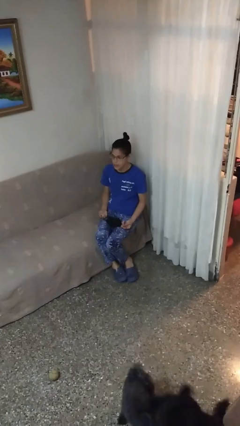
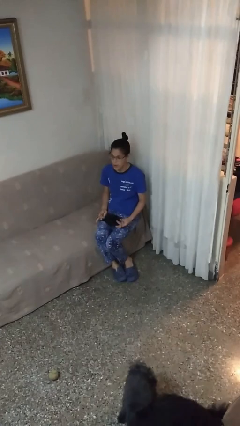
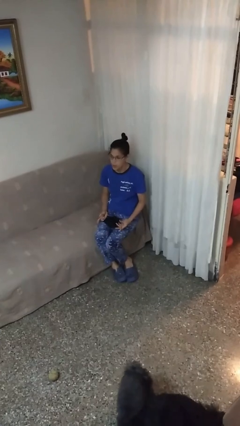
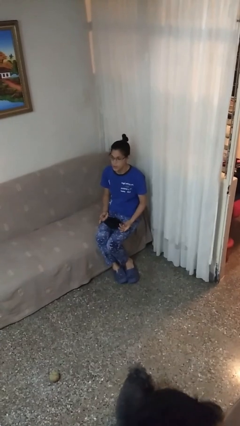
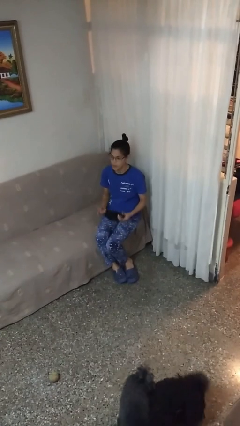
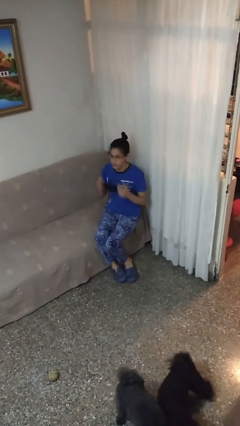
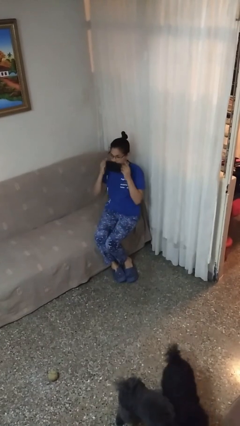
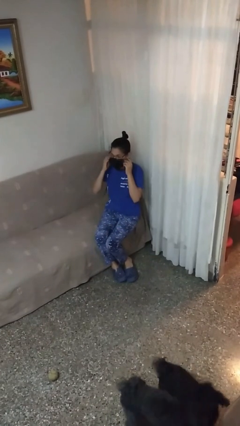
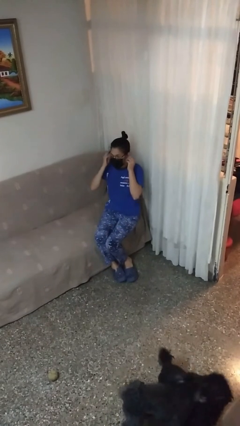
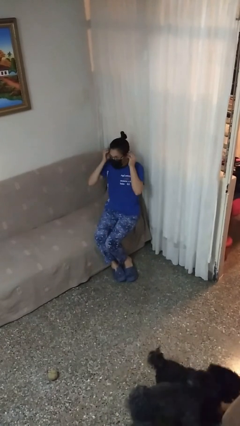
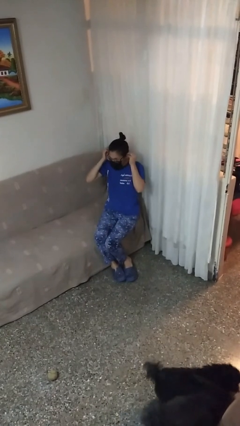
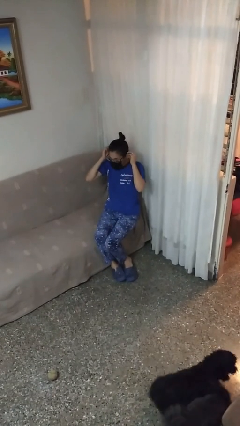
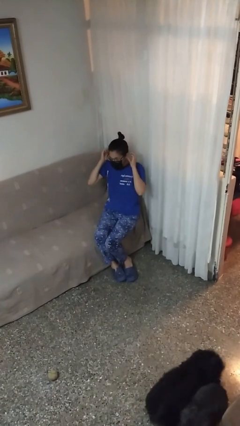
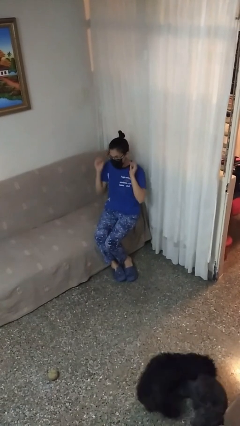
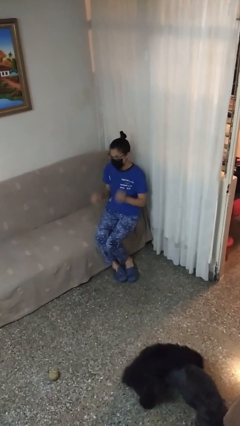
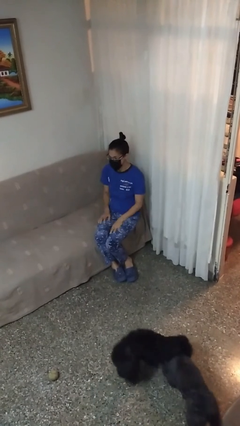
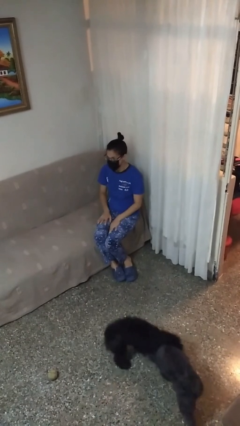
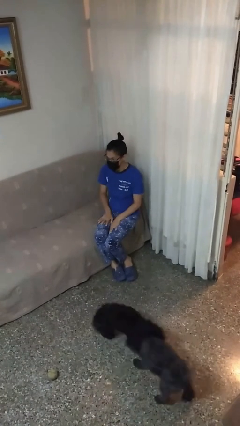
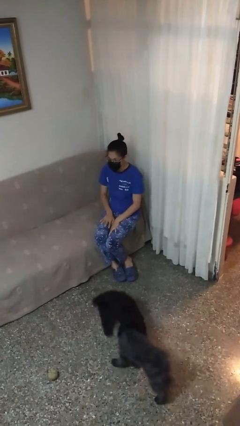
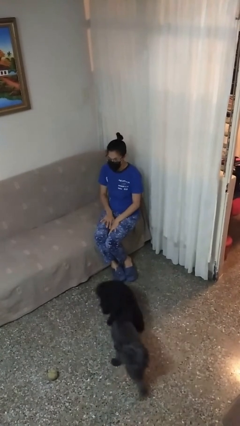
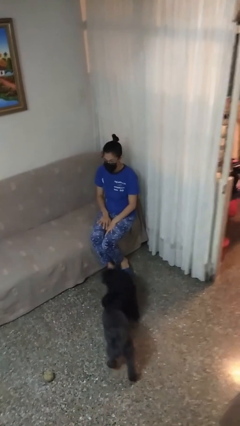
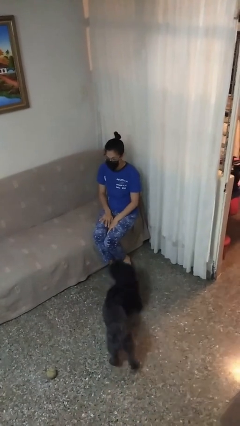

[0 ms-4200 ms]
person puts on facemask

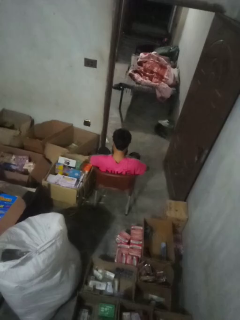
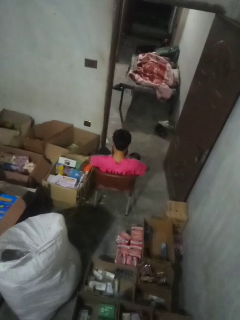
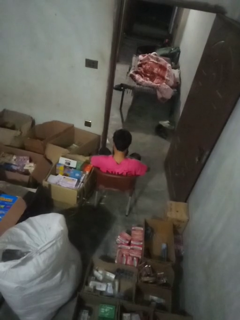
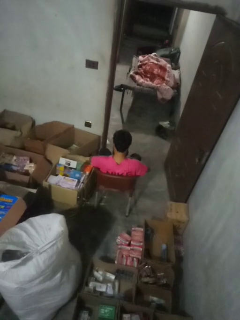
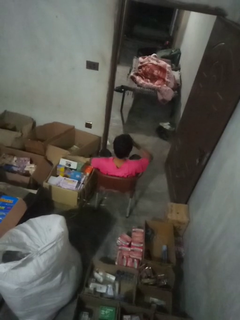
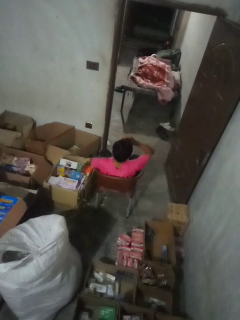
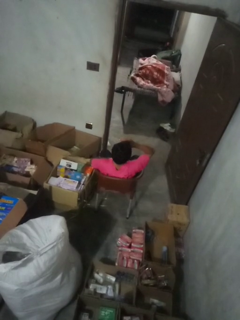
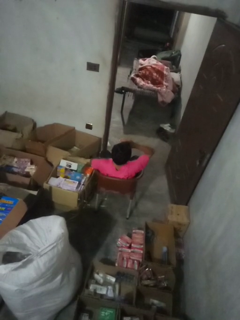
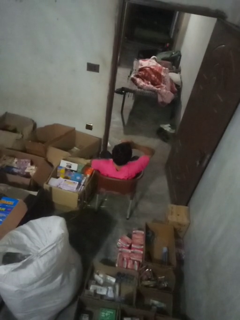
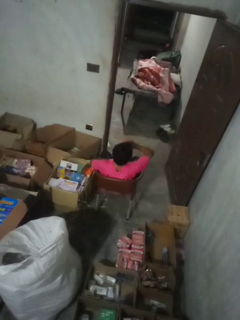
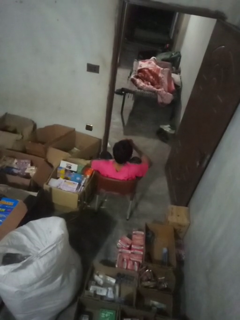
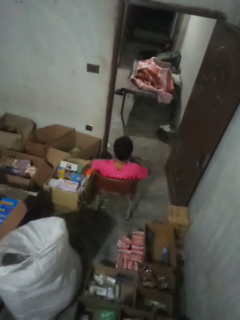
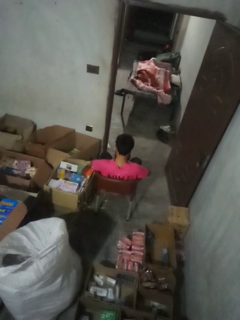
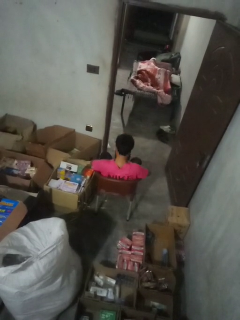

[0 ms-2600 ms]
person shades eyes

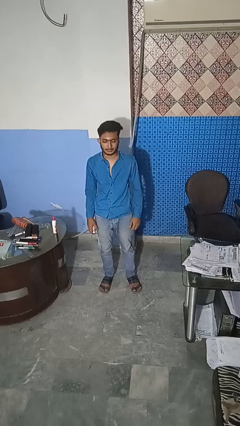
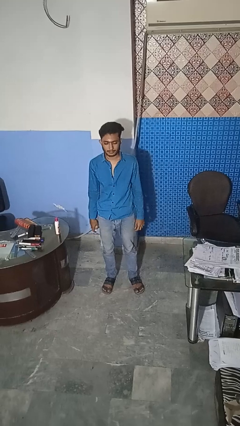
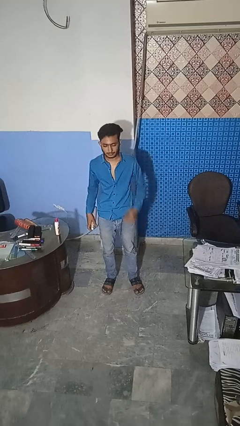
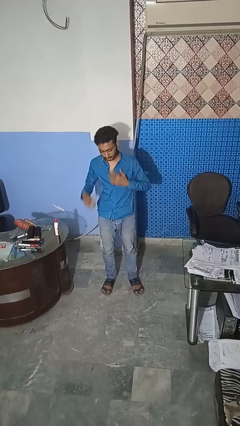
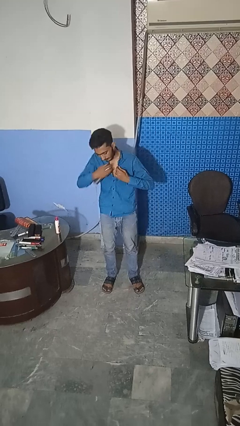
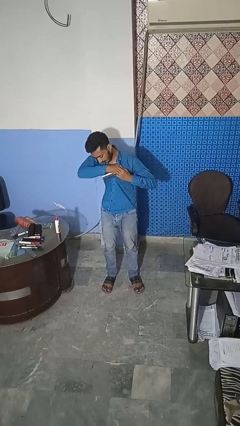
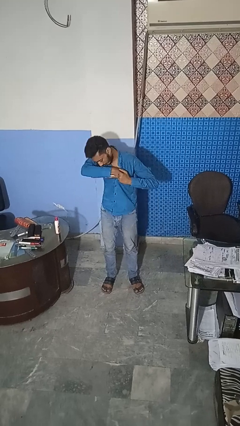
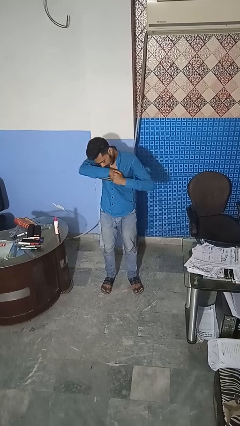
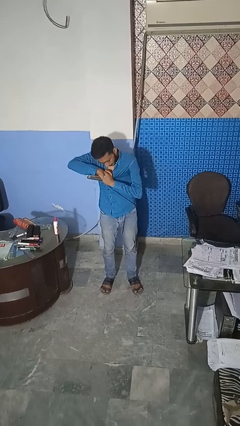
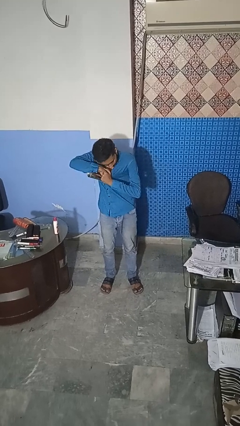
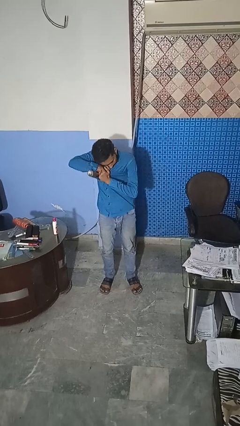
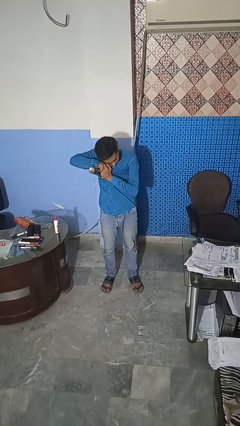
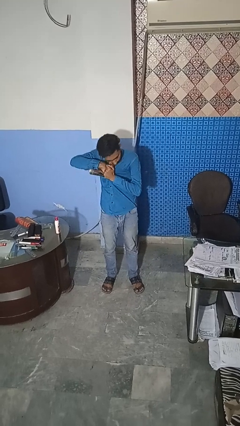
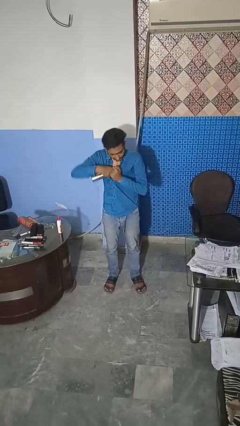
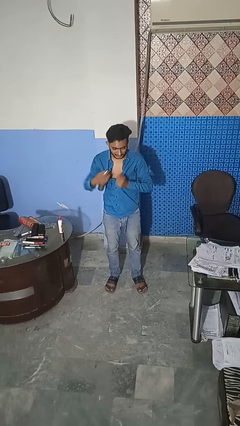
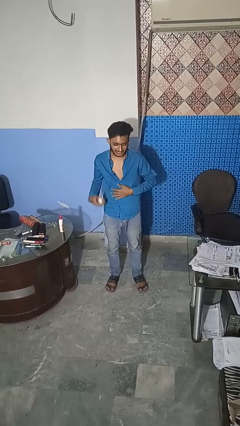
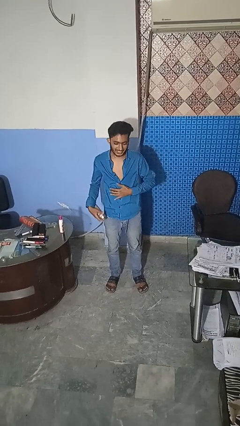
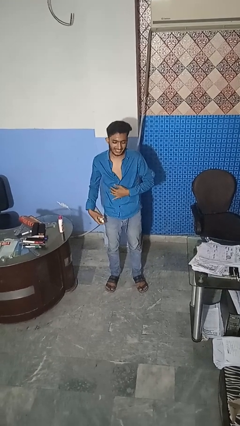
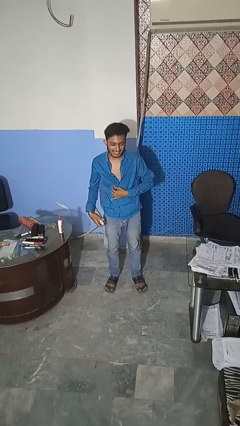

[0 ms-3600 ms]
person applies deodorant

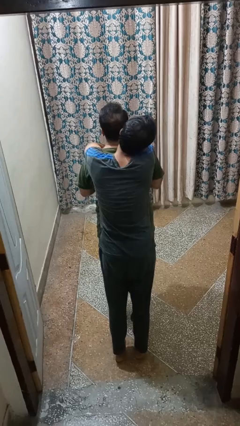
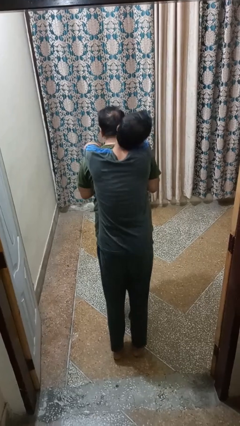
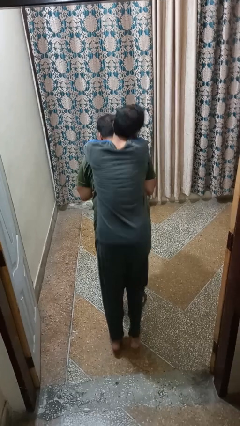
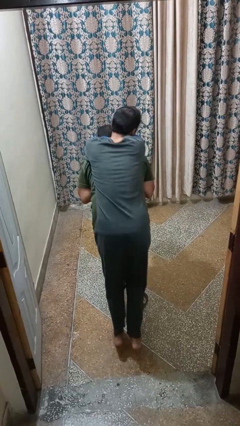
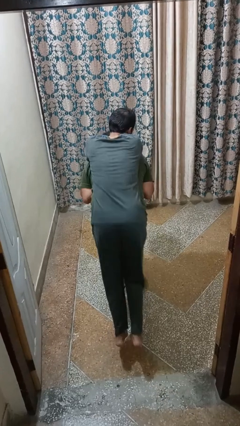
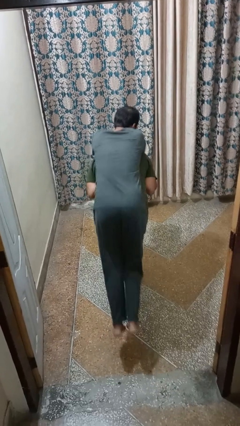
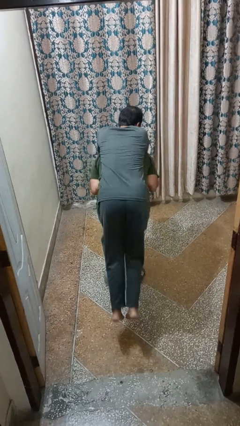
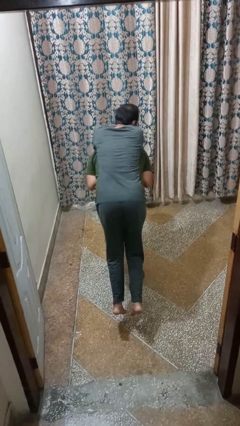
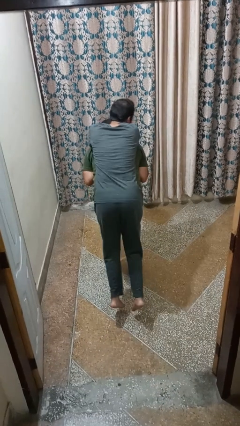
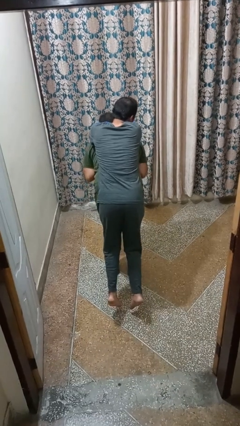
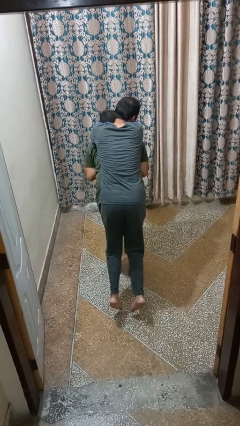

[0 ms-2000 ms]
person carries person on back

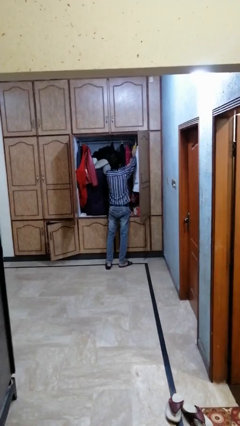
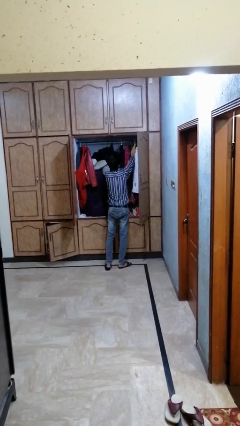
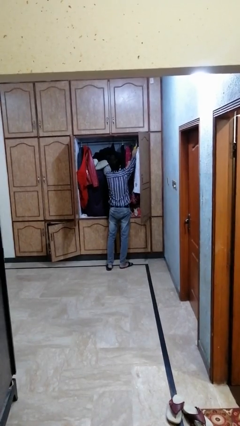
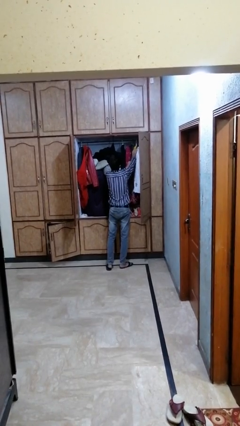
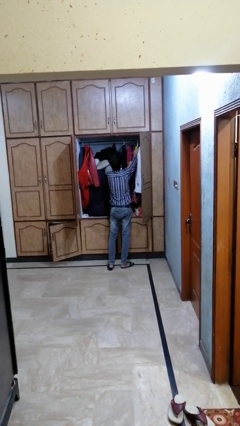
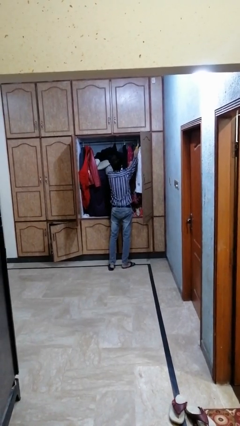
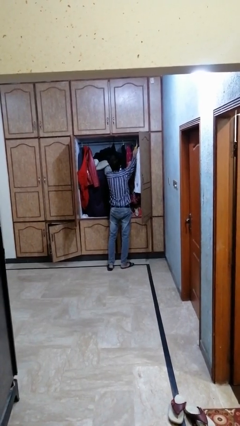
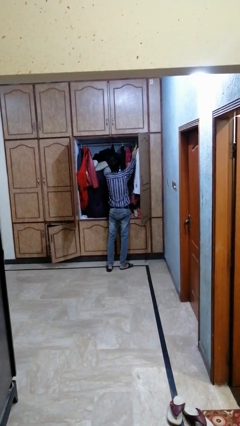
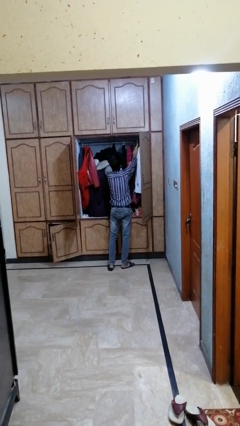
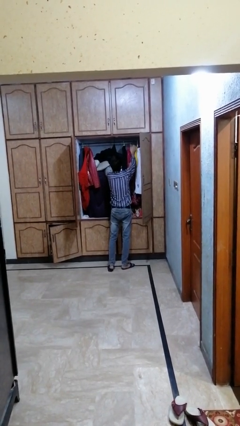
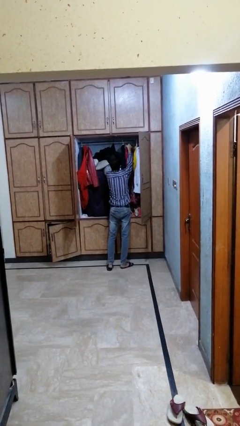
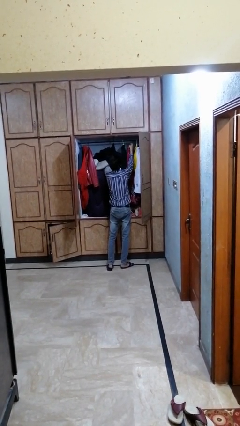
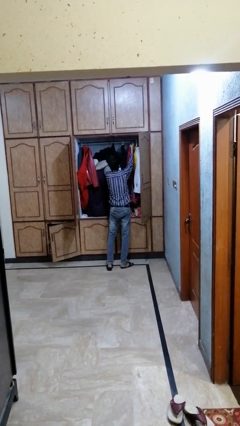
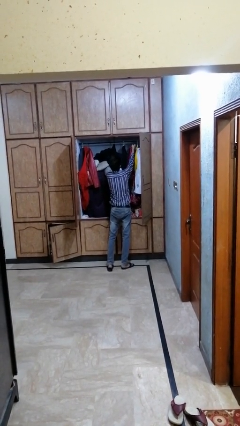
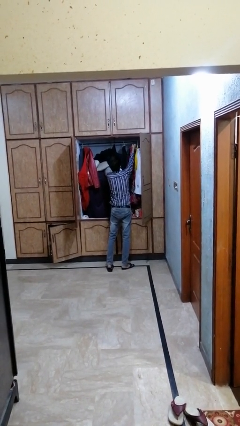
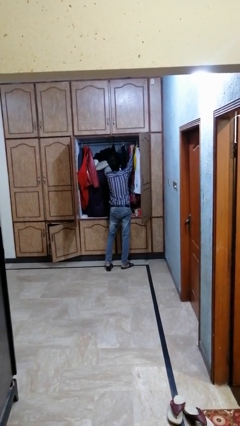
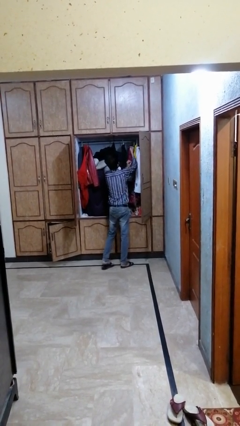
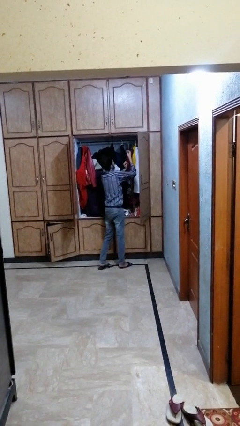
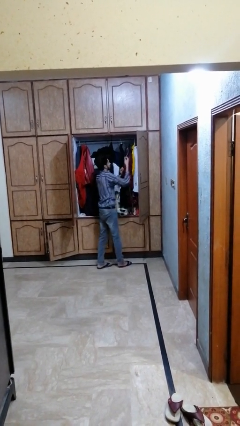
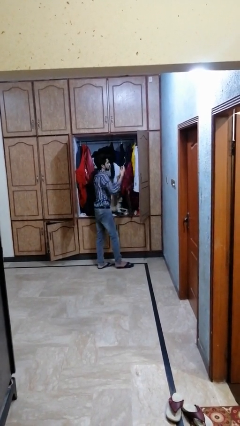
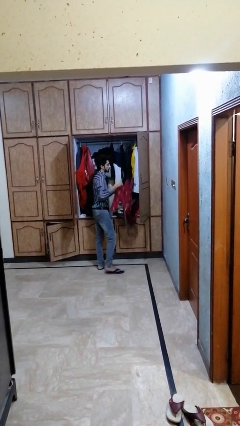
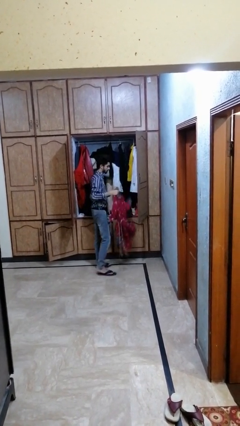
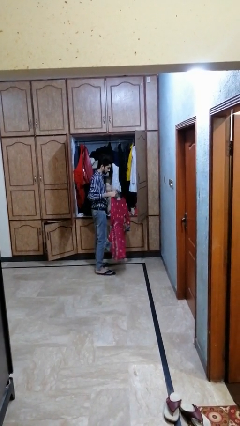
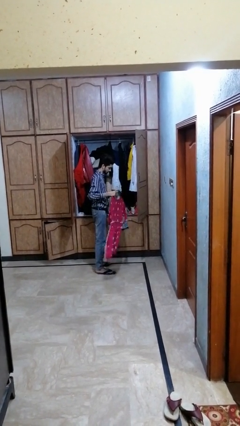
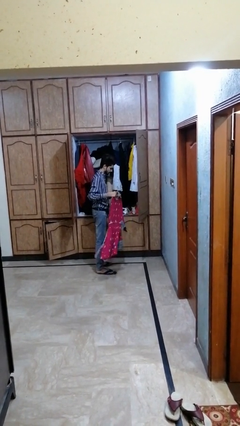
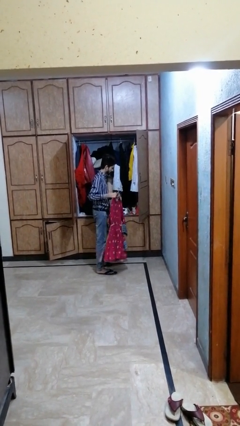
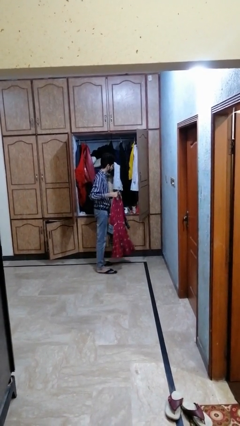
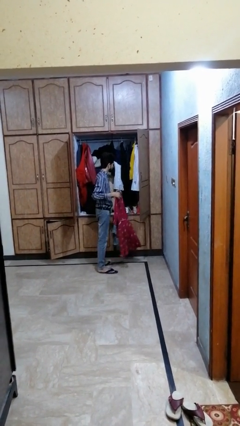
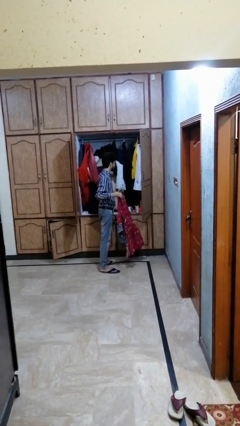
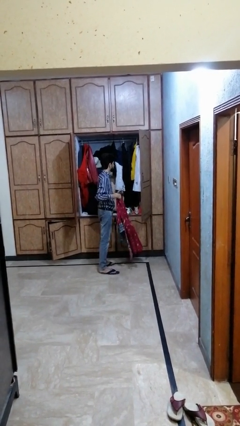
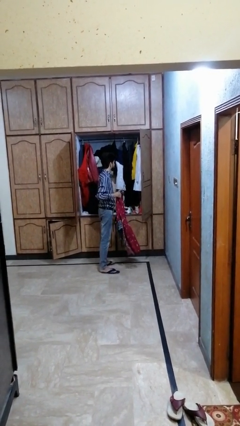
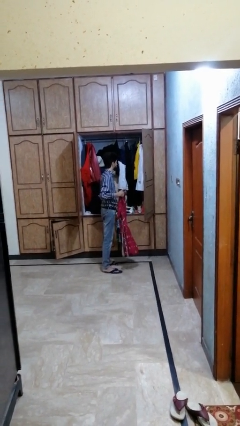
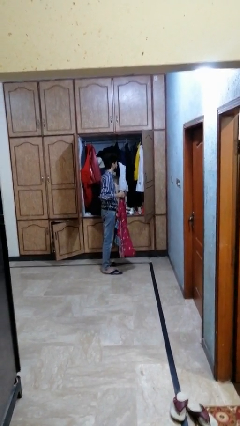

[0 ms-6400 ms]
person takes clothes from dresser
